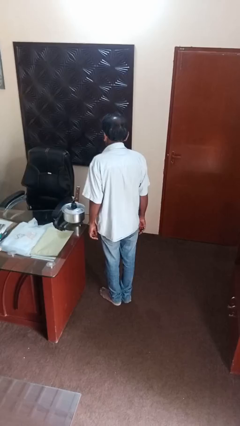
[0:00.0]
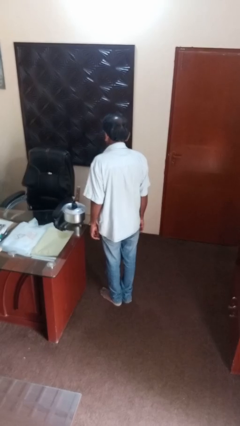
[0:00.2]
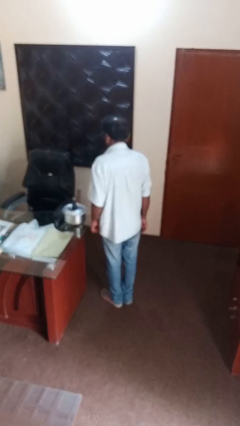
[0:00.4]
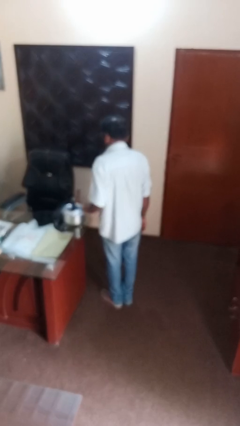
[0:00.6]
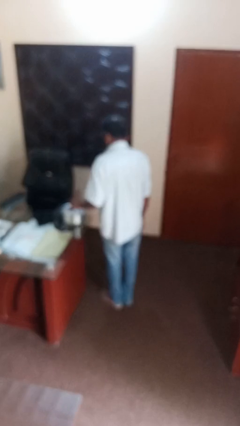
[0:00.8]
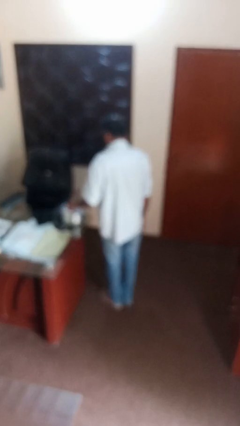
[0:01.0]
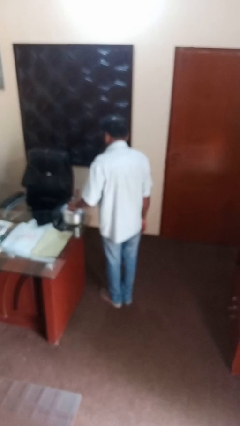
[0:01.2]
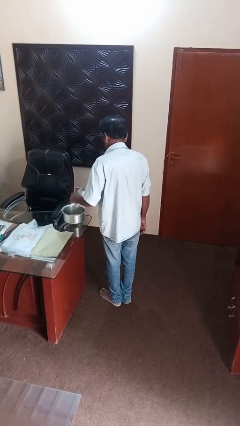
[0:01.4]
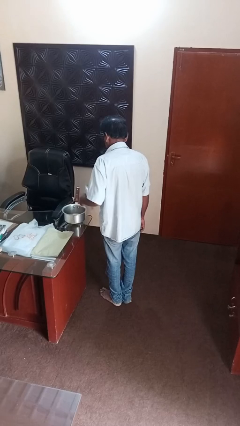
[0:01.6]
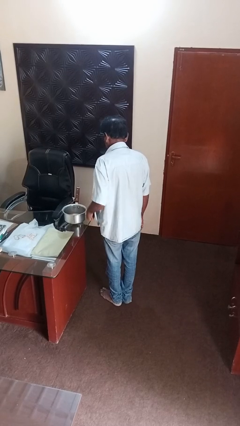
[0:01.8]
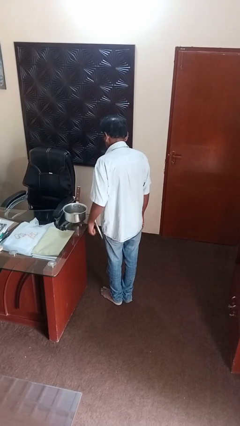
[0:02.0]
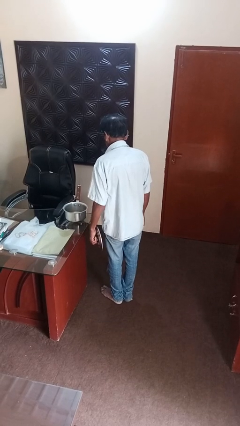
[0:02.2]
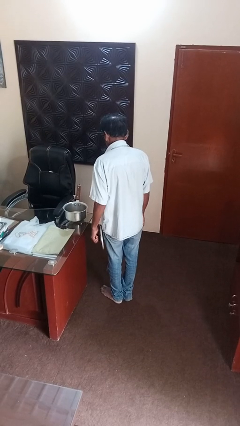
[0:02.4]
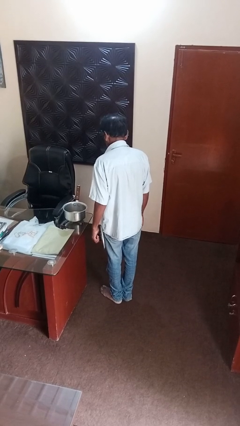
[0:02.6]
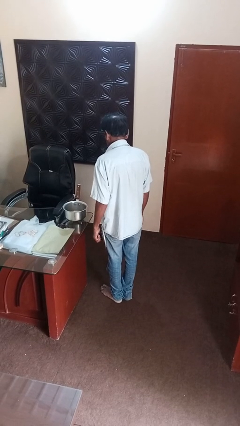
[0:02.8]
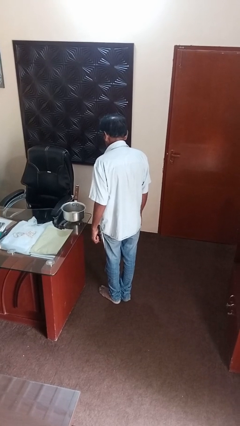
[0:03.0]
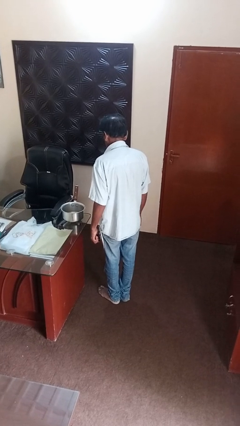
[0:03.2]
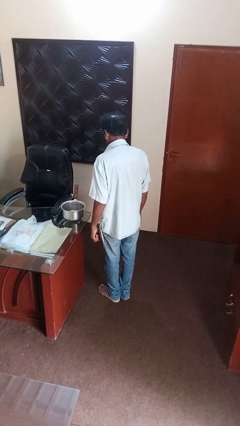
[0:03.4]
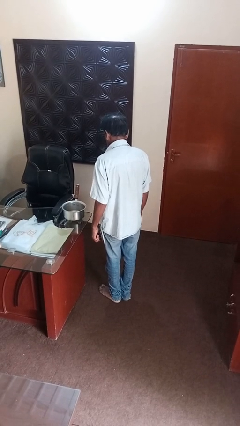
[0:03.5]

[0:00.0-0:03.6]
person opens jar

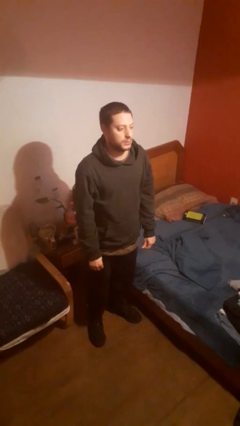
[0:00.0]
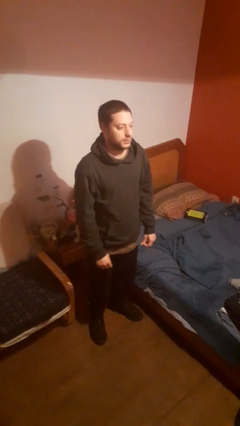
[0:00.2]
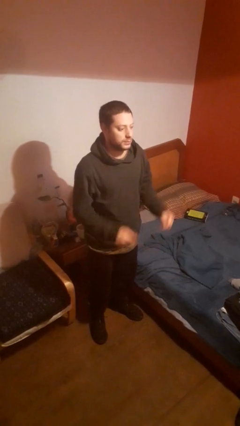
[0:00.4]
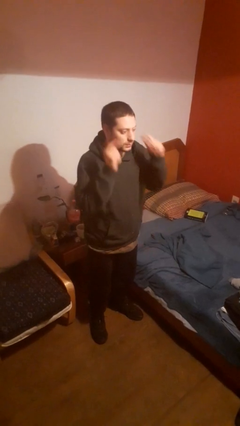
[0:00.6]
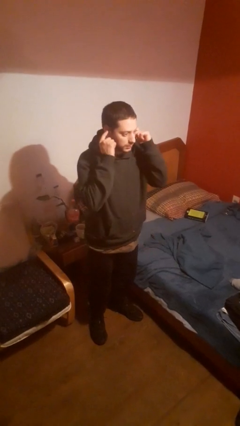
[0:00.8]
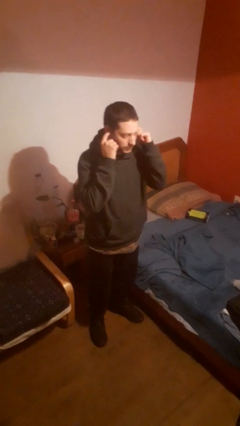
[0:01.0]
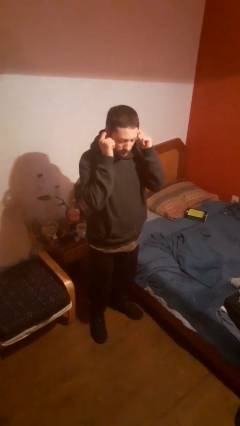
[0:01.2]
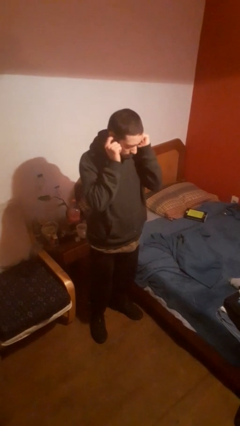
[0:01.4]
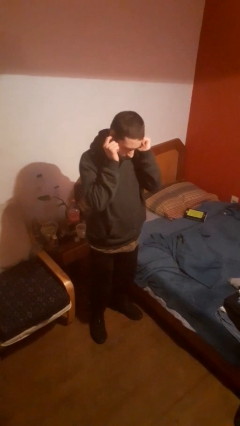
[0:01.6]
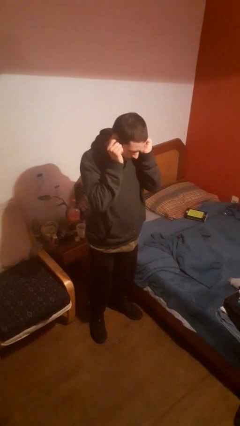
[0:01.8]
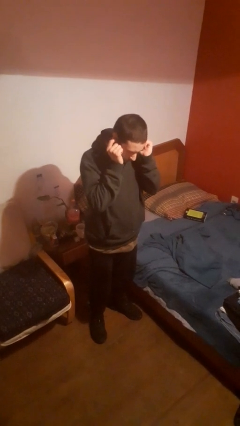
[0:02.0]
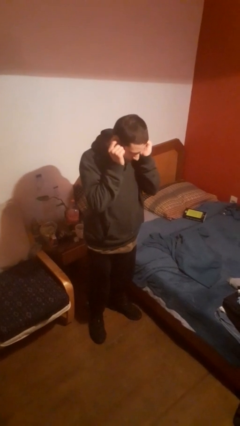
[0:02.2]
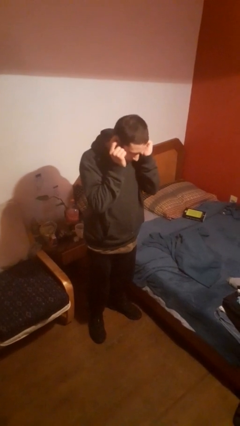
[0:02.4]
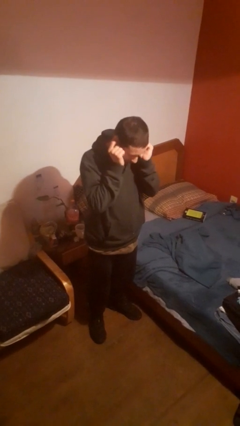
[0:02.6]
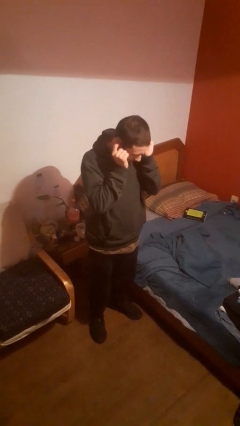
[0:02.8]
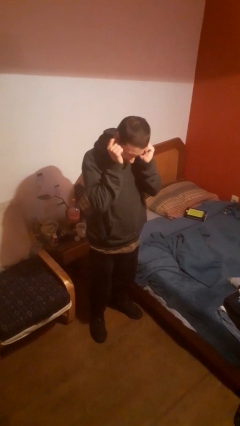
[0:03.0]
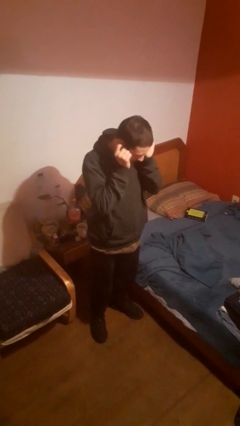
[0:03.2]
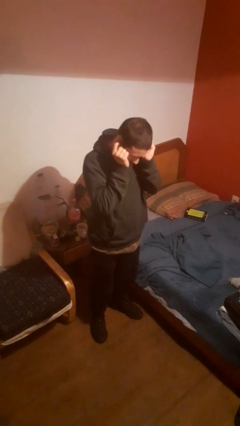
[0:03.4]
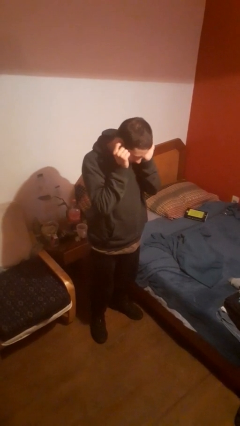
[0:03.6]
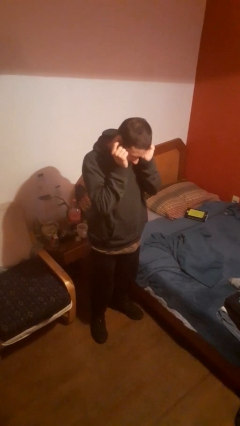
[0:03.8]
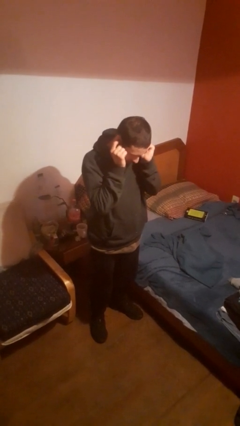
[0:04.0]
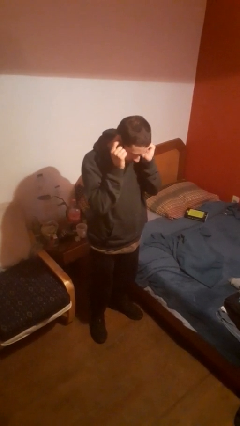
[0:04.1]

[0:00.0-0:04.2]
person puts fingers in ear

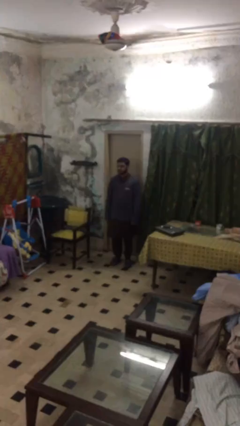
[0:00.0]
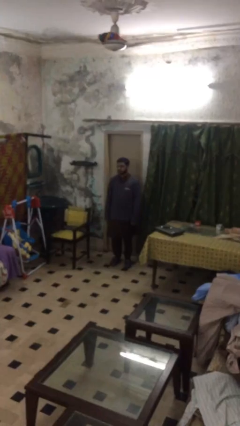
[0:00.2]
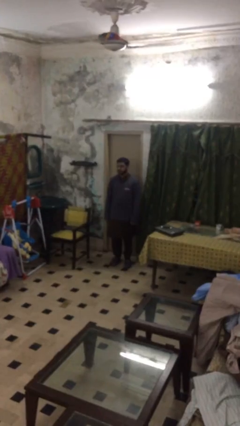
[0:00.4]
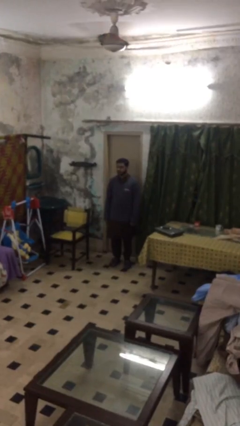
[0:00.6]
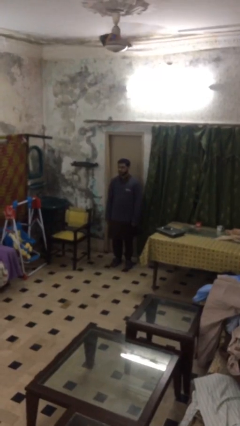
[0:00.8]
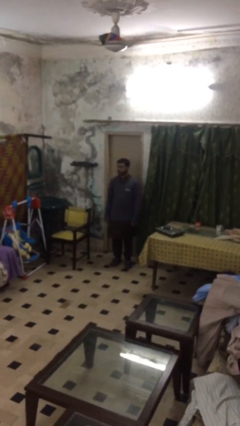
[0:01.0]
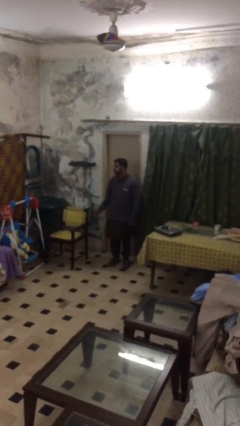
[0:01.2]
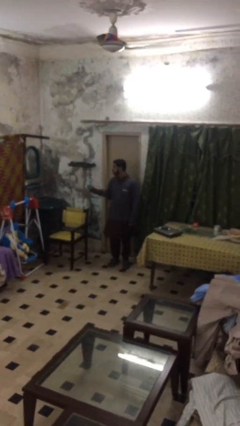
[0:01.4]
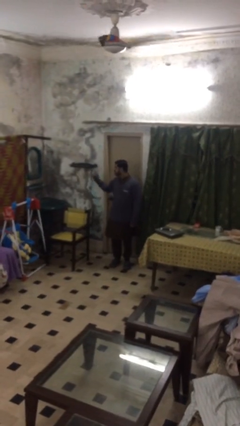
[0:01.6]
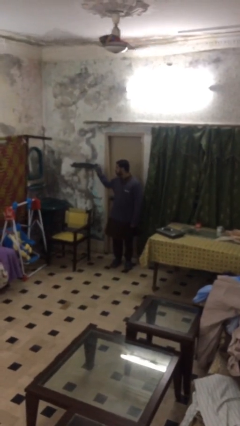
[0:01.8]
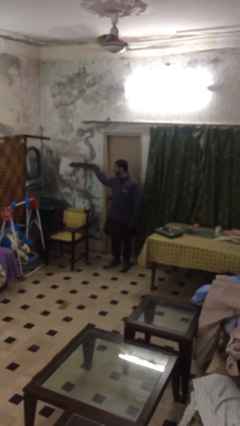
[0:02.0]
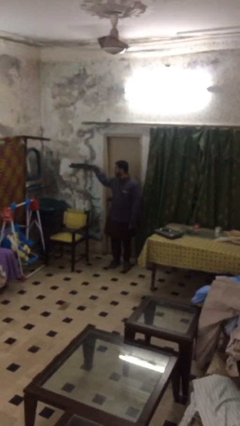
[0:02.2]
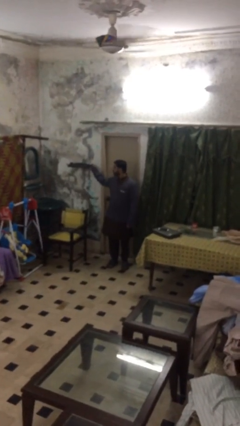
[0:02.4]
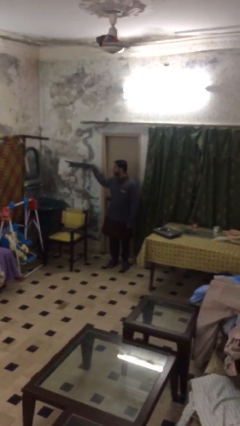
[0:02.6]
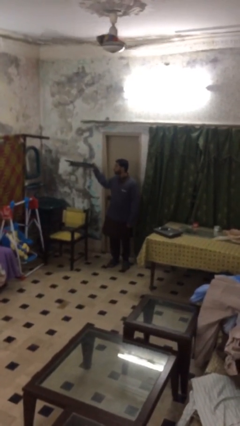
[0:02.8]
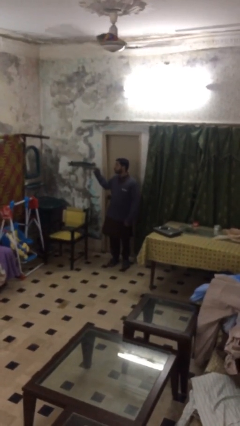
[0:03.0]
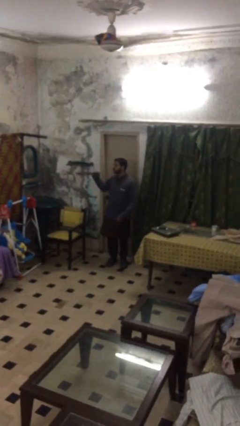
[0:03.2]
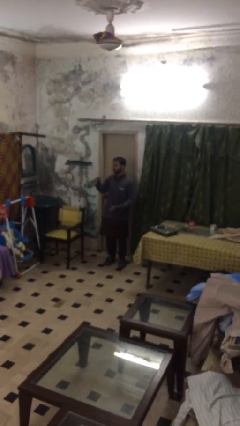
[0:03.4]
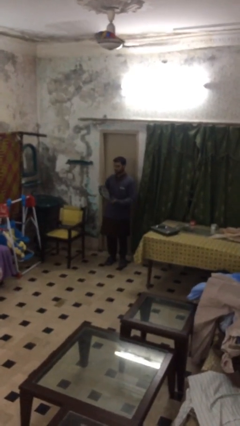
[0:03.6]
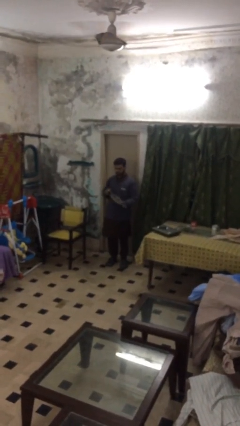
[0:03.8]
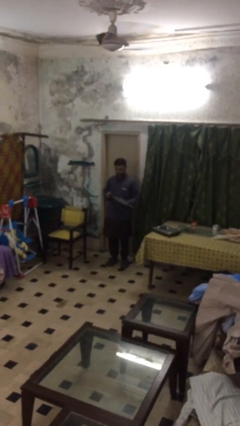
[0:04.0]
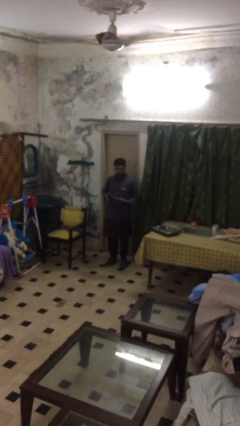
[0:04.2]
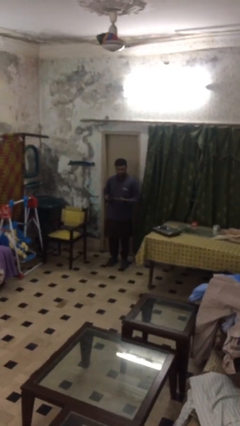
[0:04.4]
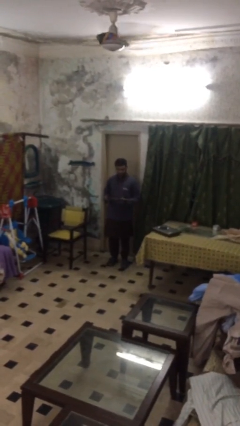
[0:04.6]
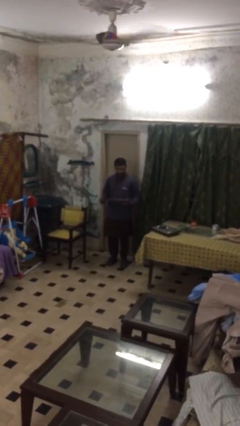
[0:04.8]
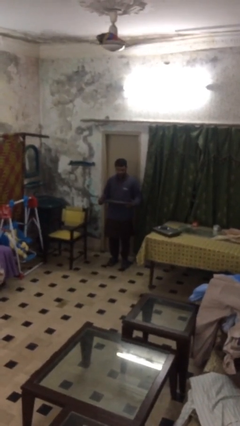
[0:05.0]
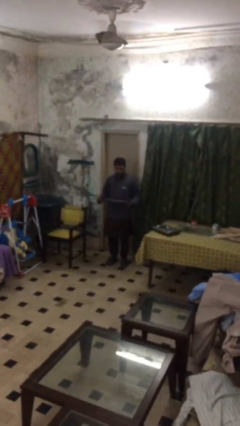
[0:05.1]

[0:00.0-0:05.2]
person picks up object from shelf

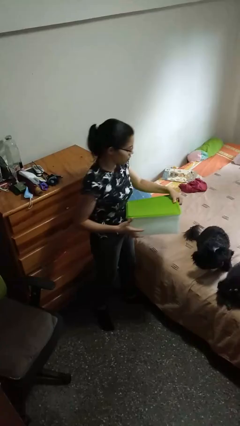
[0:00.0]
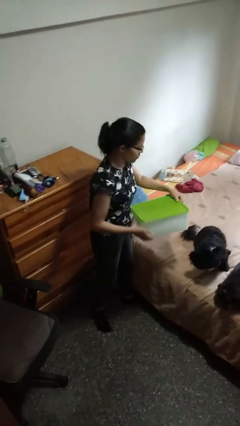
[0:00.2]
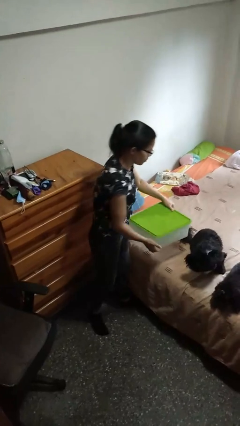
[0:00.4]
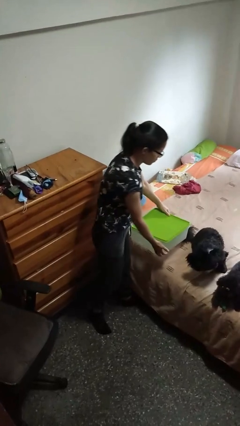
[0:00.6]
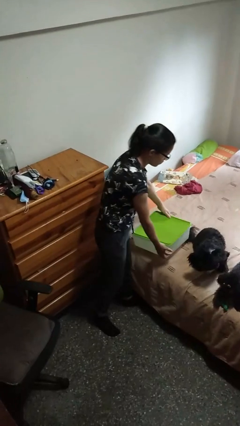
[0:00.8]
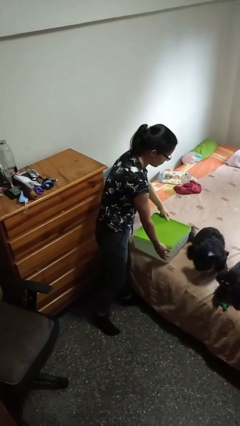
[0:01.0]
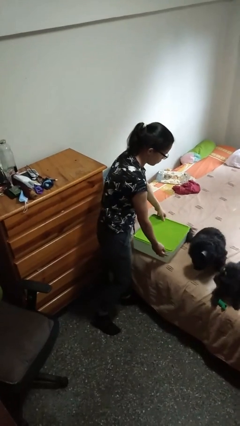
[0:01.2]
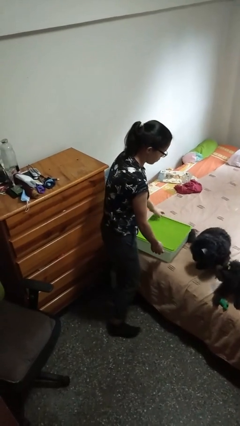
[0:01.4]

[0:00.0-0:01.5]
person puts down object on bed

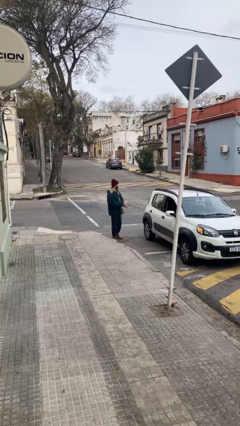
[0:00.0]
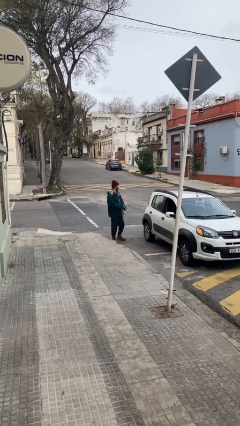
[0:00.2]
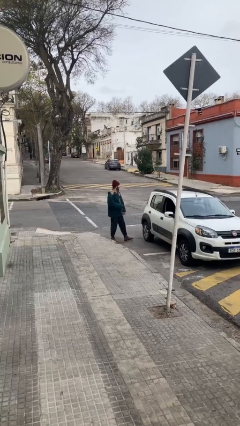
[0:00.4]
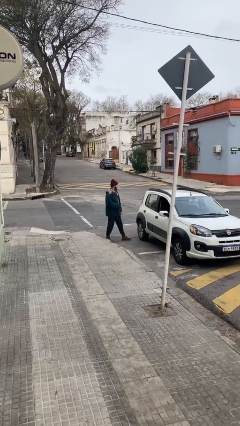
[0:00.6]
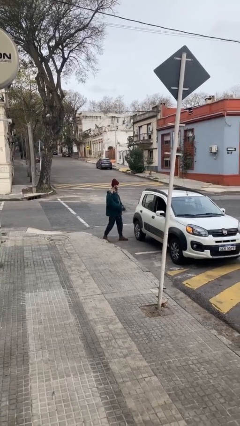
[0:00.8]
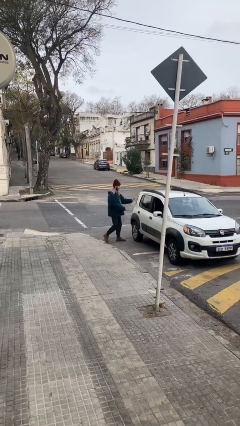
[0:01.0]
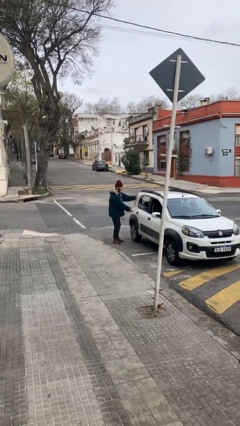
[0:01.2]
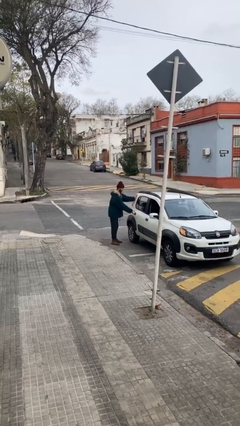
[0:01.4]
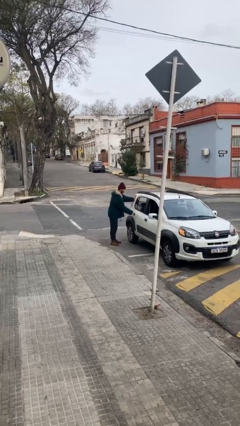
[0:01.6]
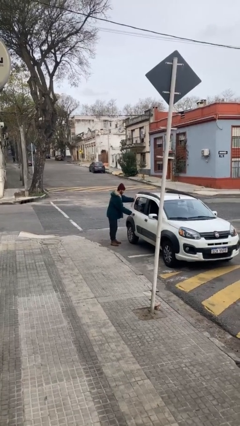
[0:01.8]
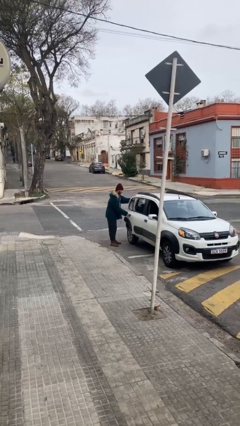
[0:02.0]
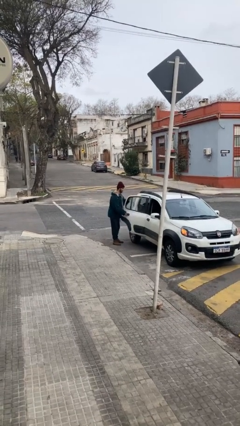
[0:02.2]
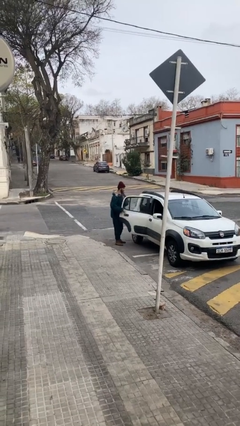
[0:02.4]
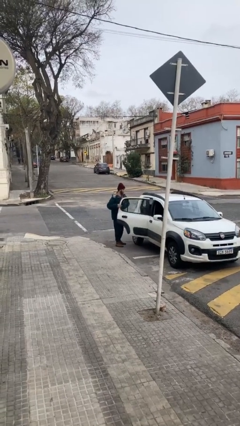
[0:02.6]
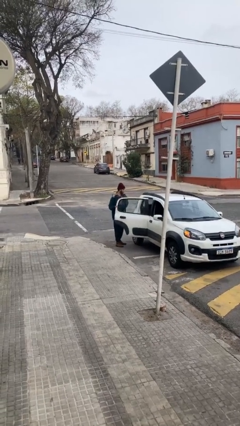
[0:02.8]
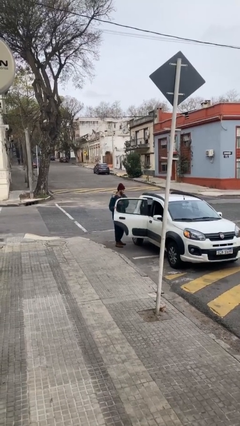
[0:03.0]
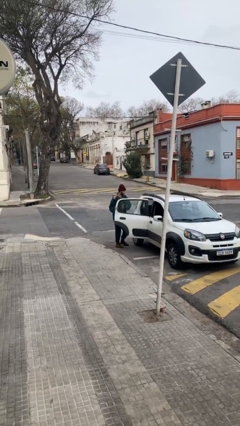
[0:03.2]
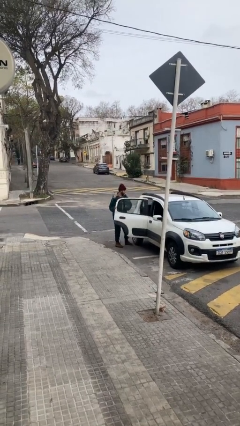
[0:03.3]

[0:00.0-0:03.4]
person opens car door
